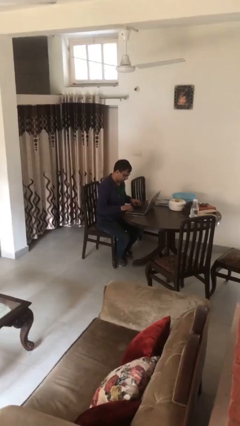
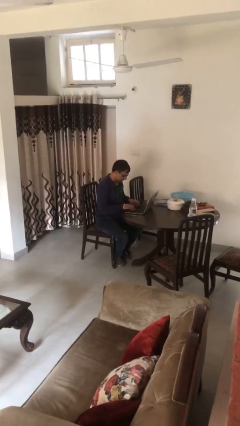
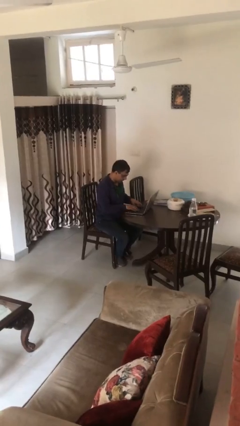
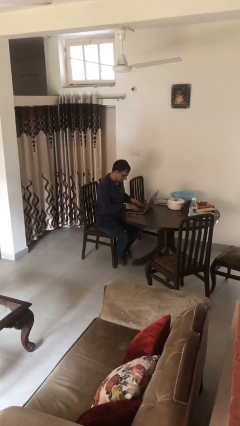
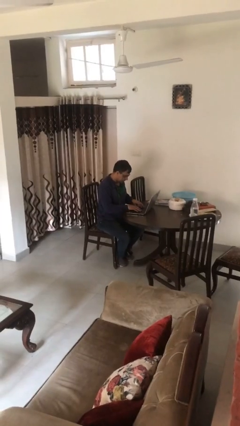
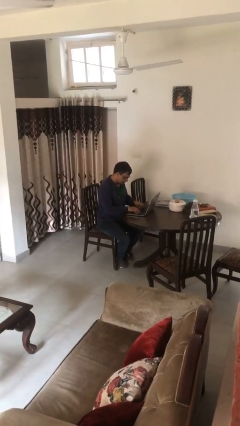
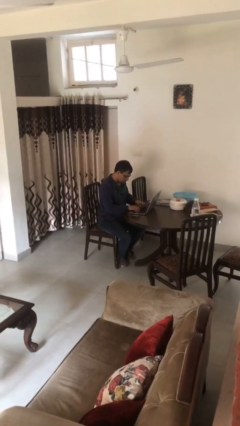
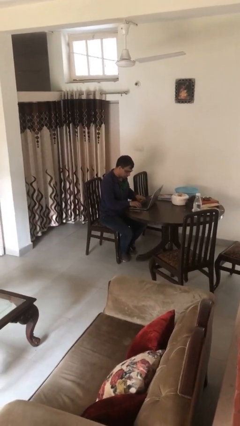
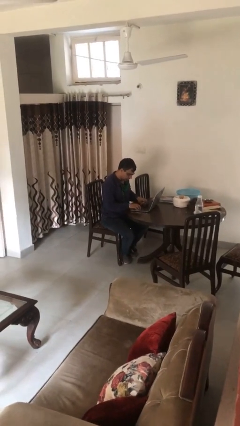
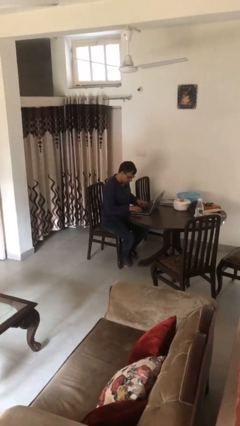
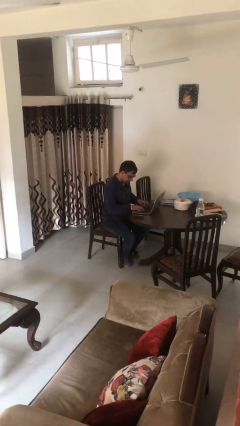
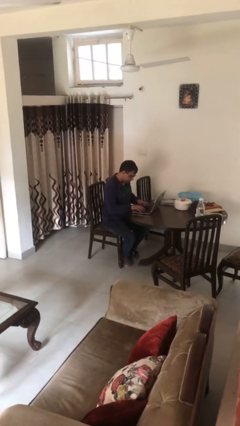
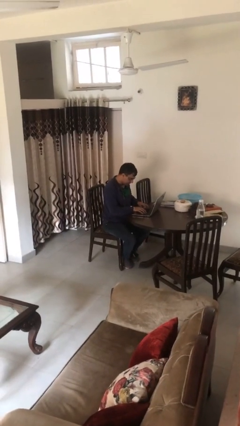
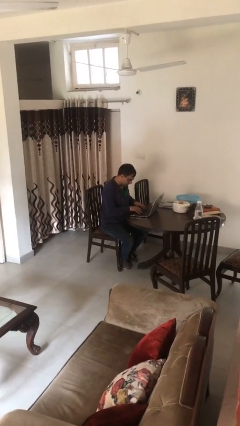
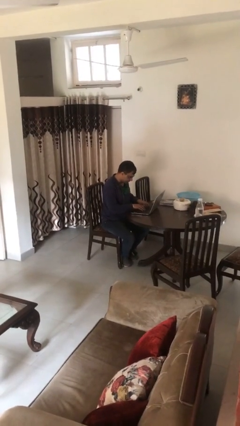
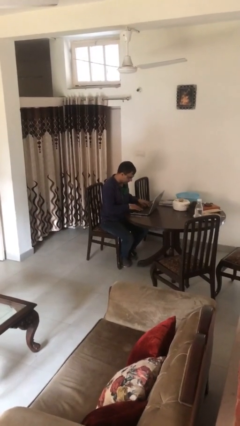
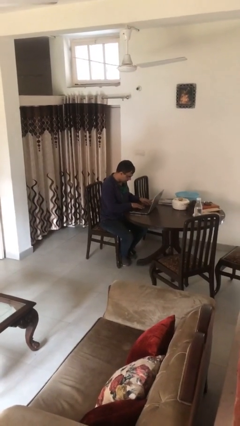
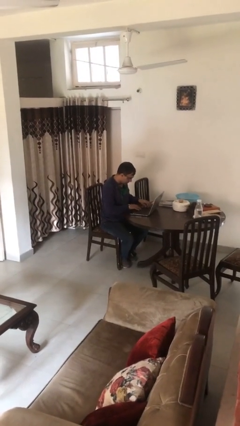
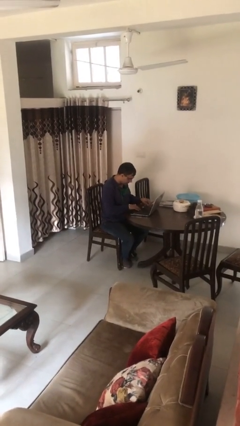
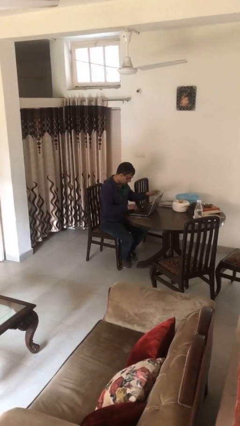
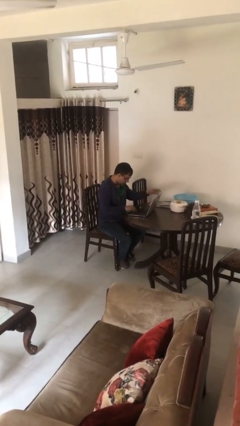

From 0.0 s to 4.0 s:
person interacts with laptop

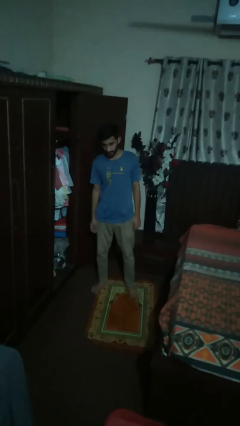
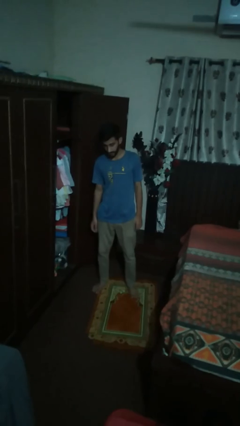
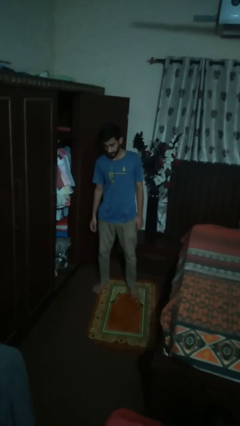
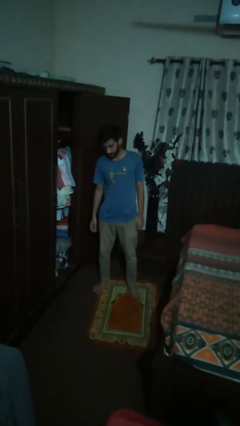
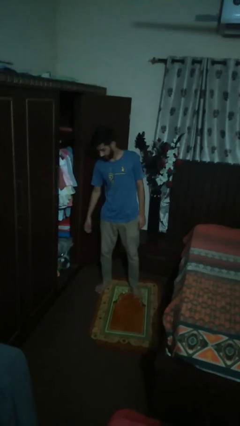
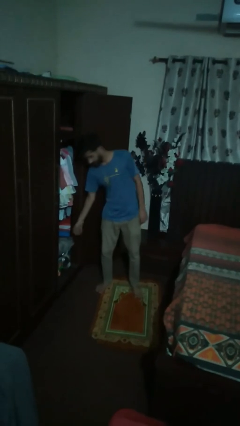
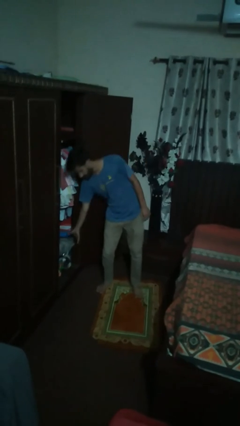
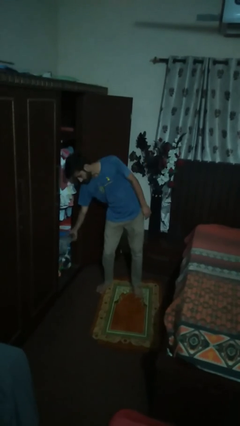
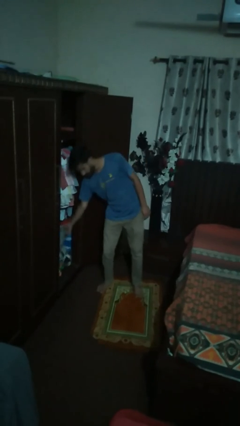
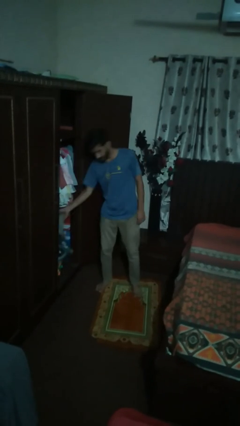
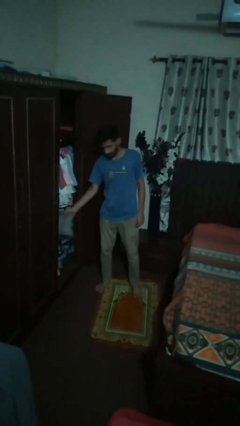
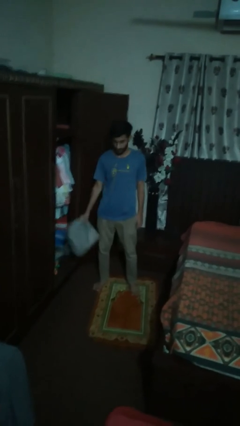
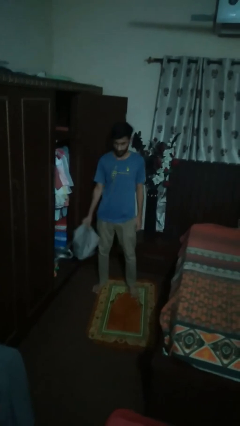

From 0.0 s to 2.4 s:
person picks up object from cabinet

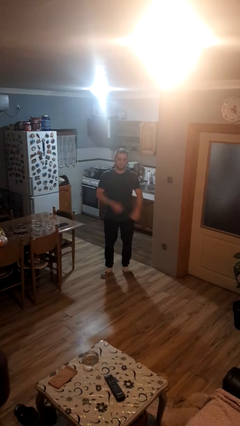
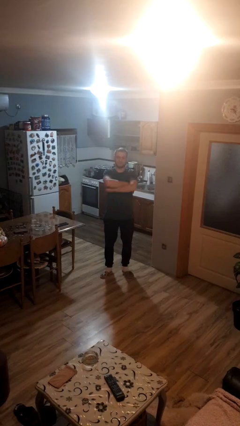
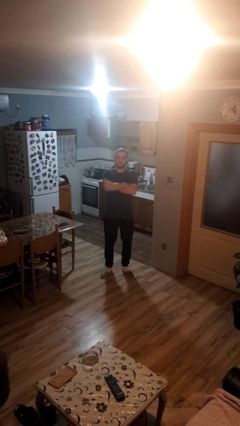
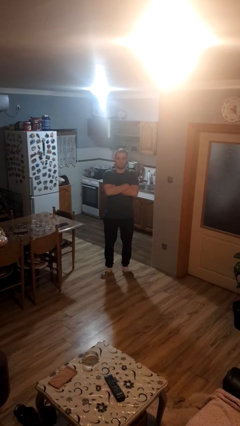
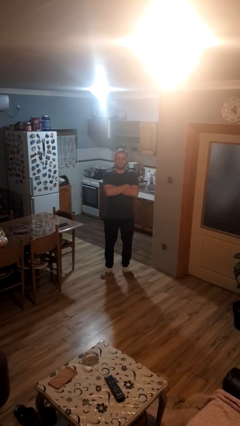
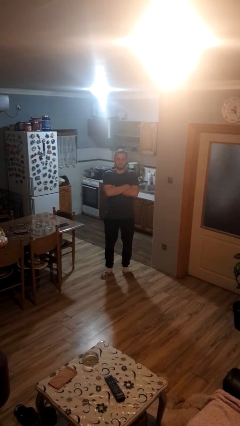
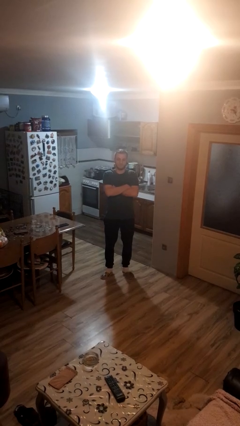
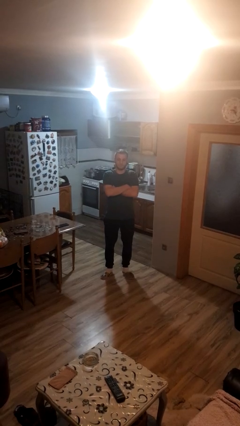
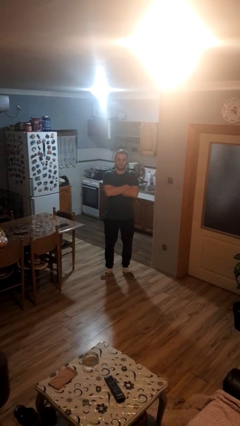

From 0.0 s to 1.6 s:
person crosses arms

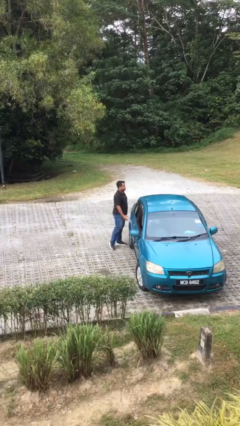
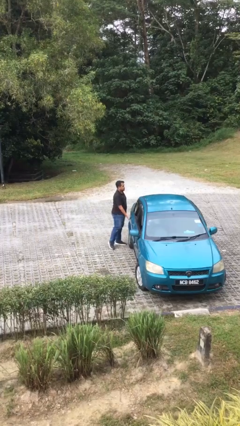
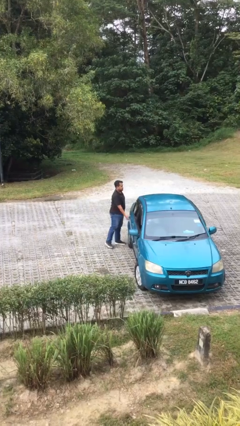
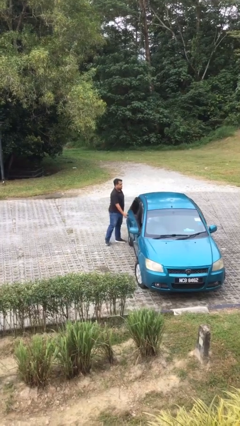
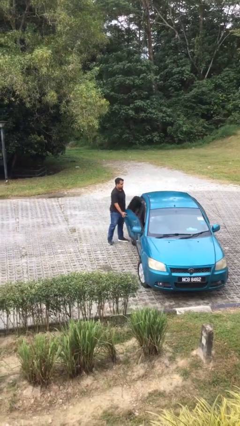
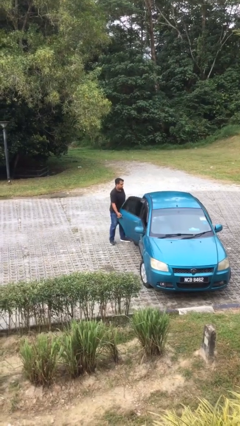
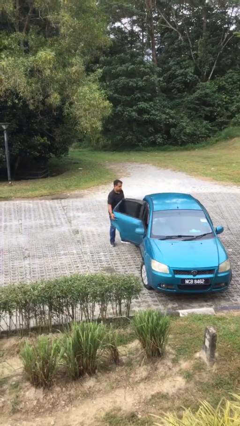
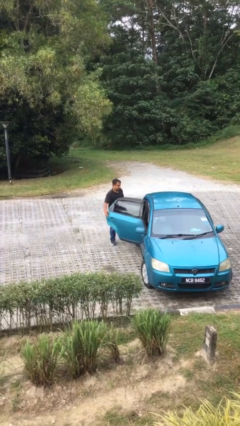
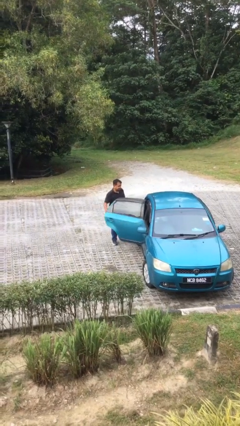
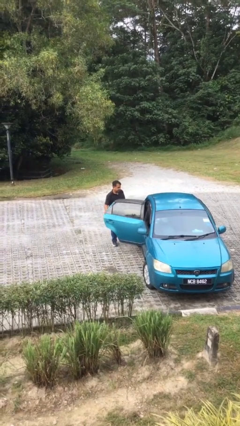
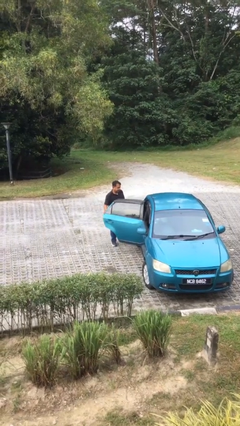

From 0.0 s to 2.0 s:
person opens car door

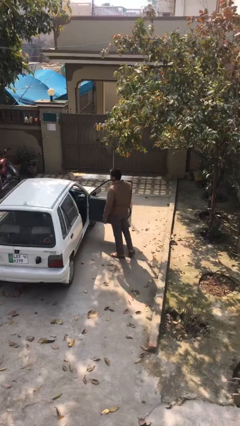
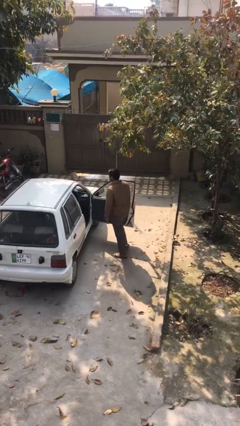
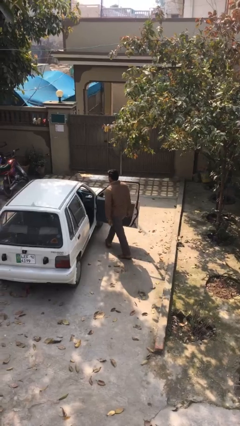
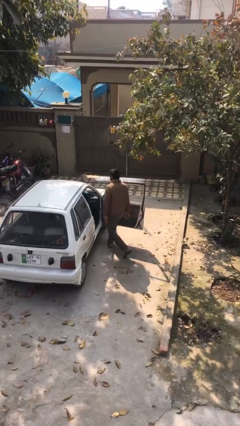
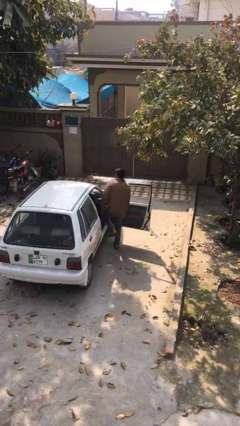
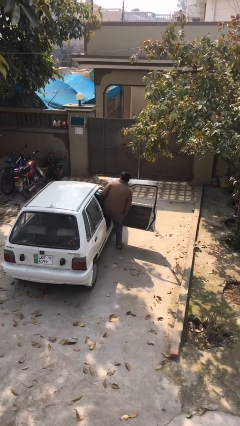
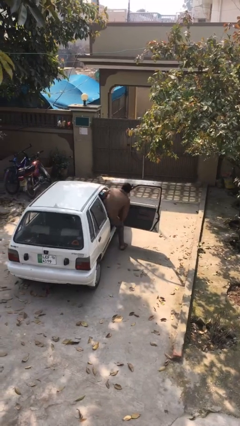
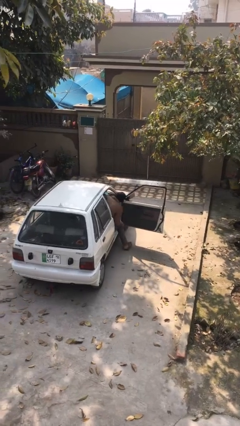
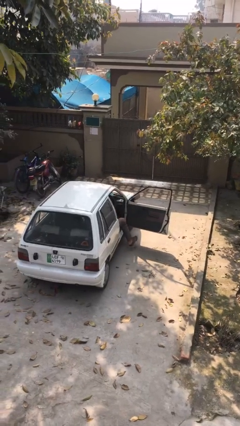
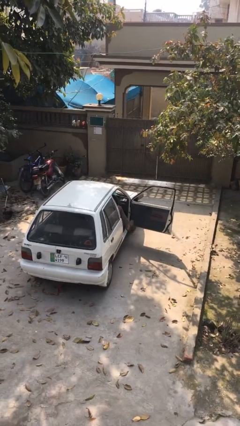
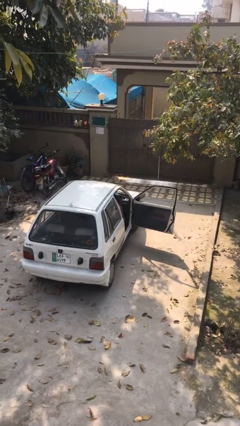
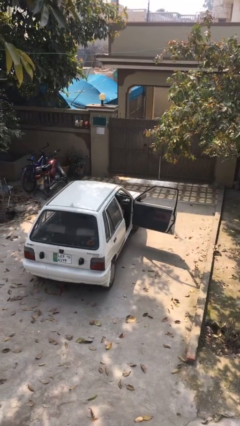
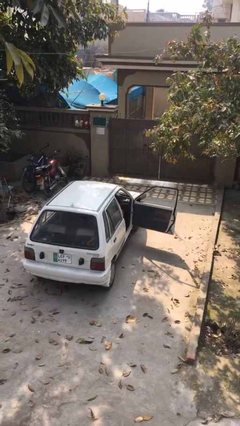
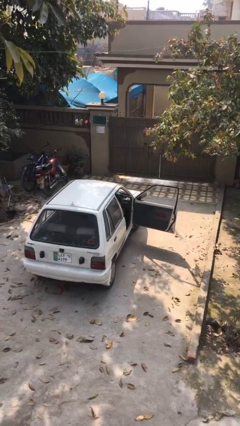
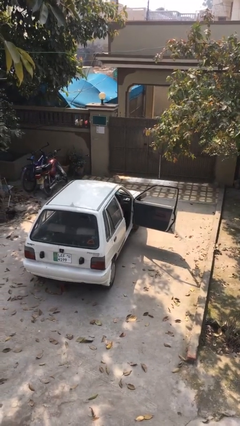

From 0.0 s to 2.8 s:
person enters car

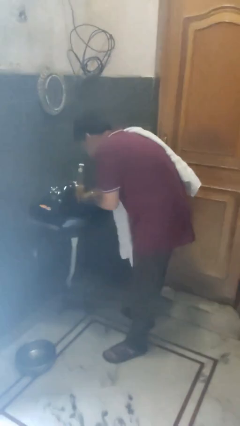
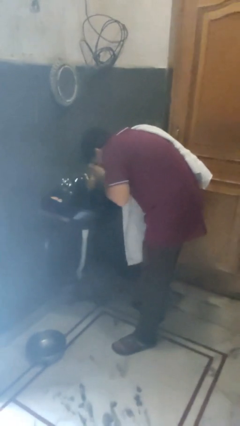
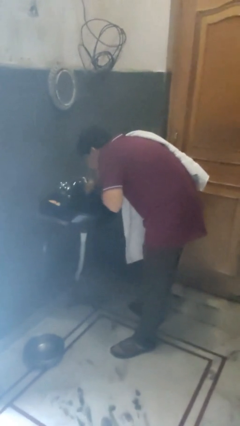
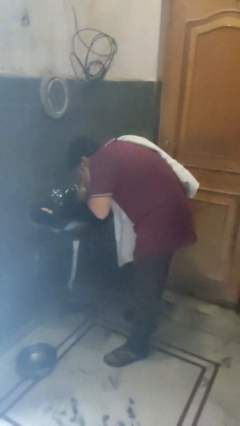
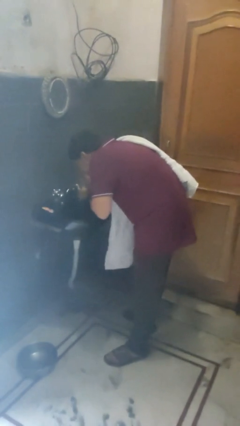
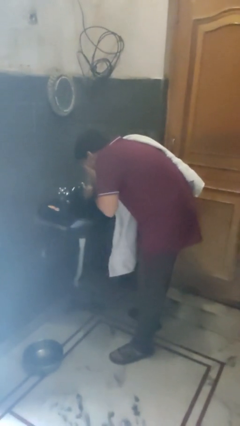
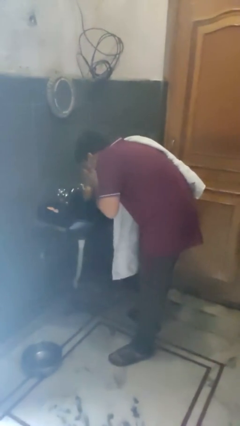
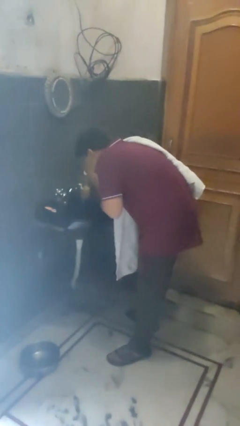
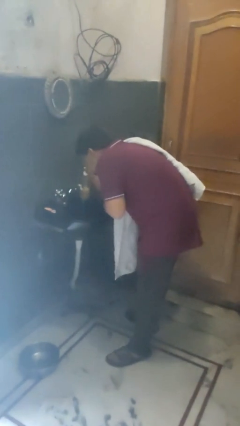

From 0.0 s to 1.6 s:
person washes face

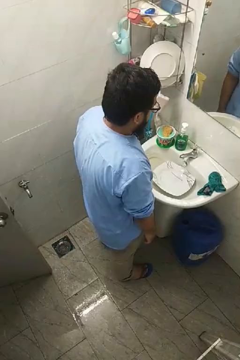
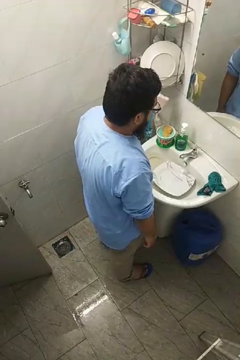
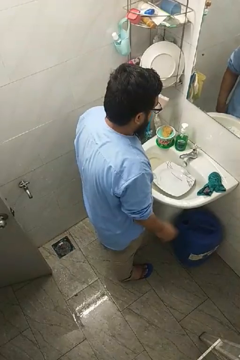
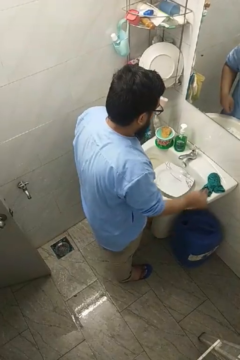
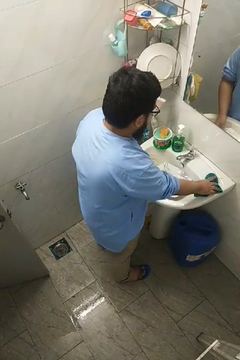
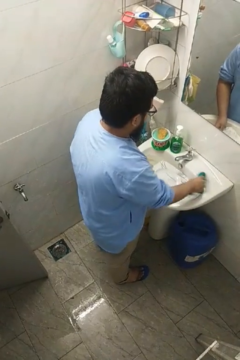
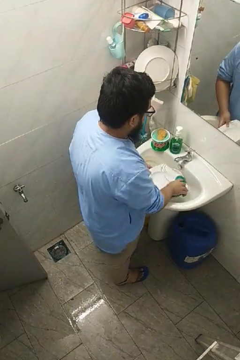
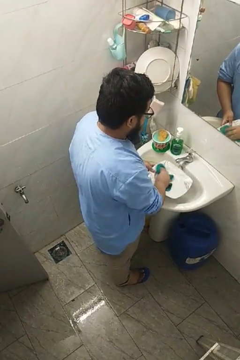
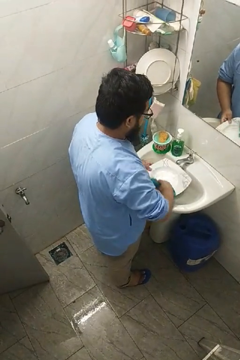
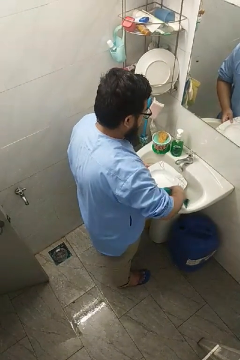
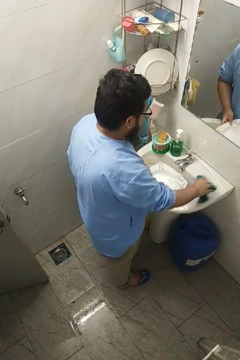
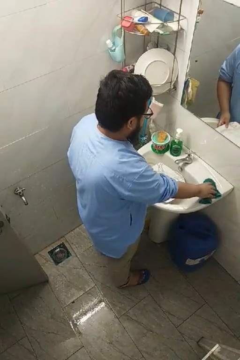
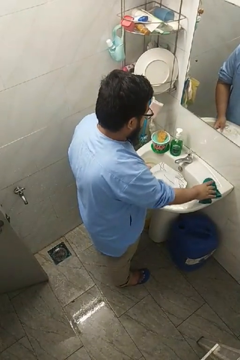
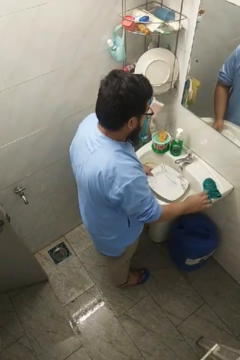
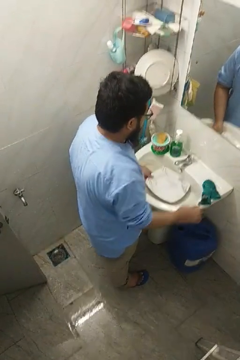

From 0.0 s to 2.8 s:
person dries dish
